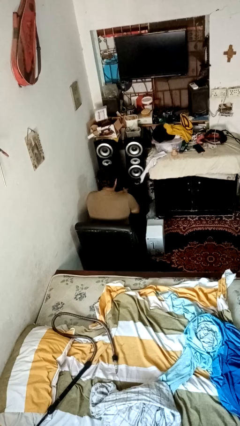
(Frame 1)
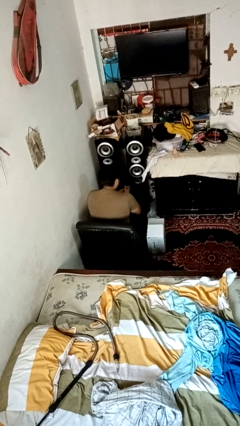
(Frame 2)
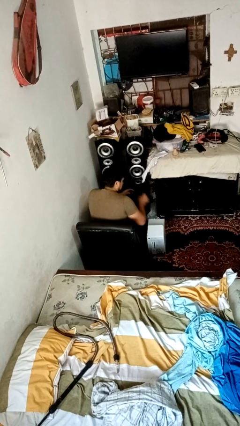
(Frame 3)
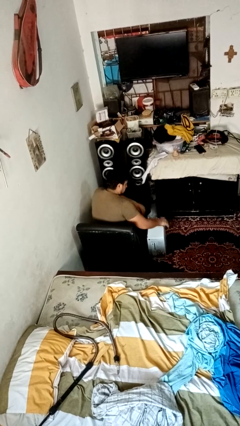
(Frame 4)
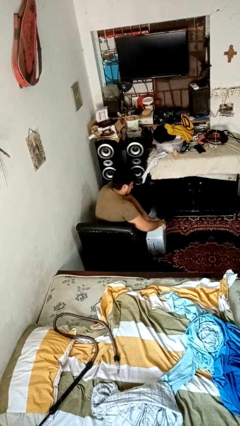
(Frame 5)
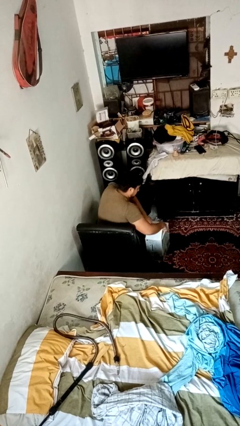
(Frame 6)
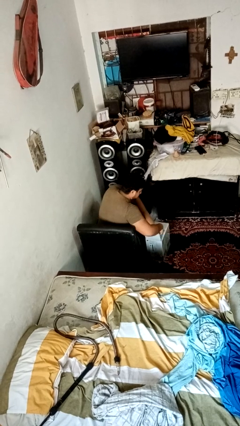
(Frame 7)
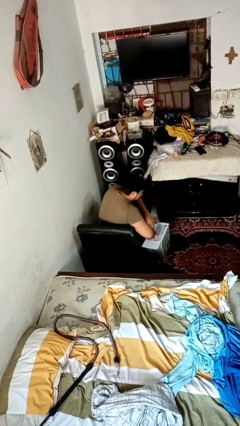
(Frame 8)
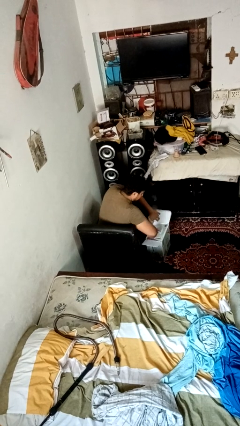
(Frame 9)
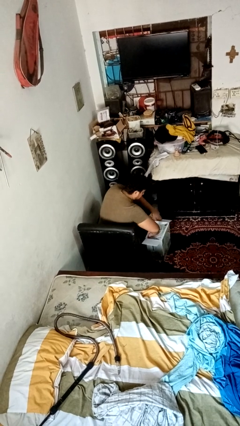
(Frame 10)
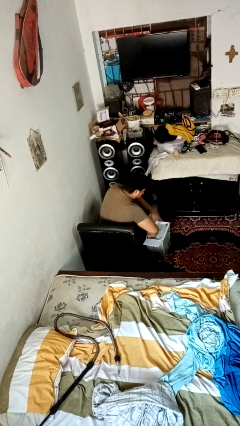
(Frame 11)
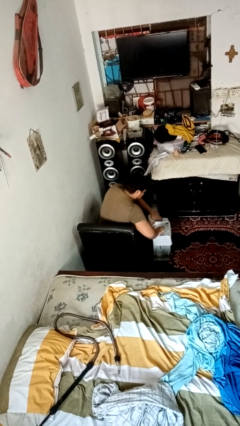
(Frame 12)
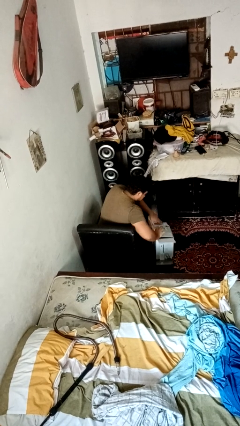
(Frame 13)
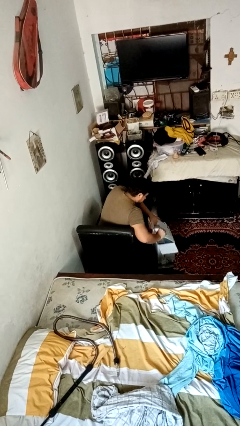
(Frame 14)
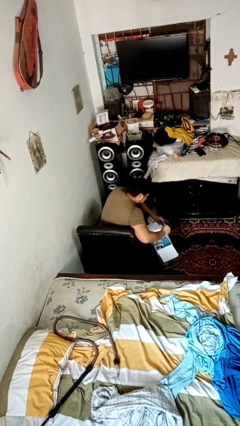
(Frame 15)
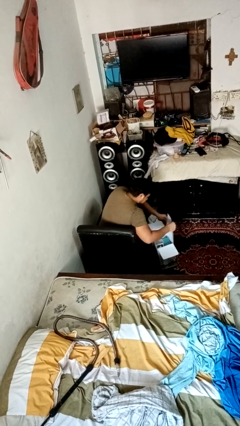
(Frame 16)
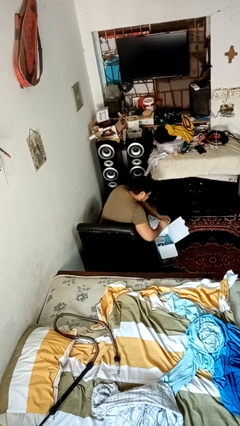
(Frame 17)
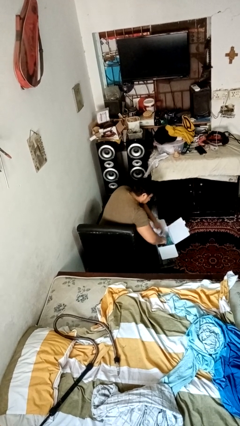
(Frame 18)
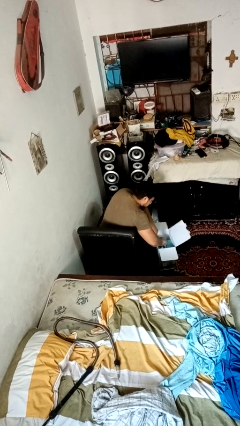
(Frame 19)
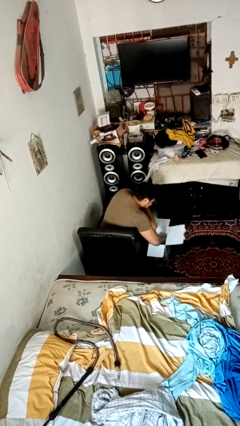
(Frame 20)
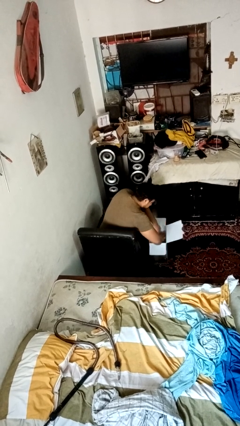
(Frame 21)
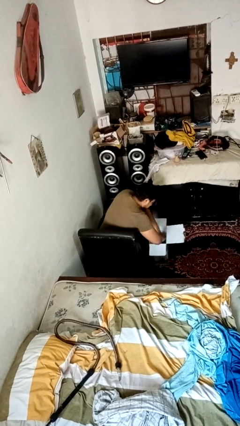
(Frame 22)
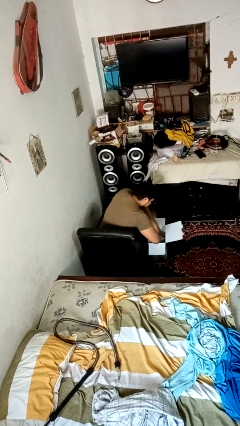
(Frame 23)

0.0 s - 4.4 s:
person searches in box

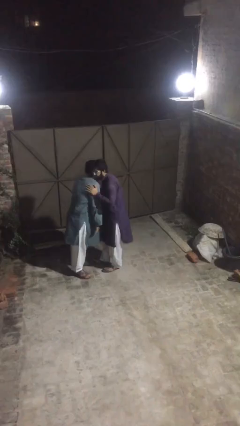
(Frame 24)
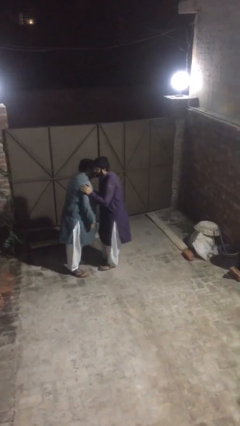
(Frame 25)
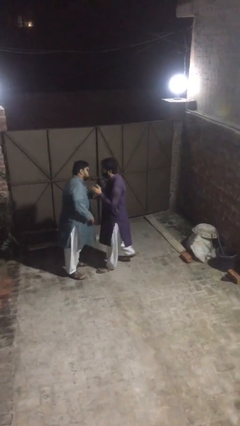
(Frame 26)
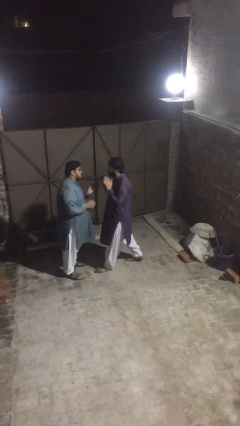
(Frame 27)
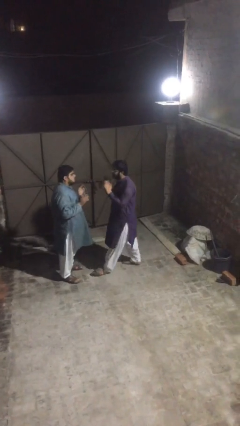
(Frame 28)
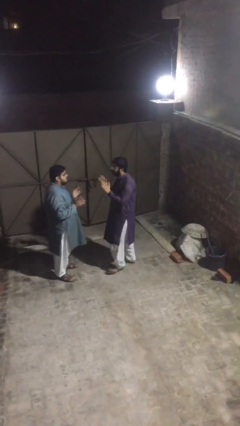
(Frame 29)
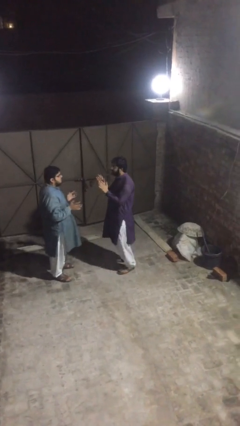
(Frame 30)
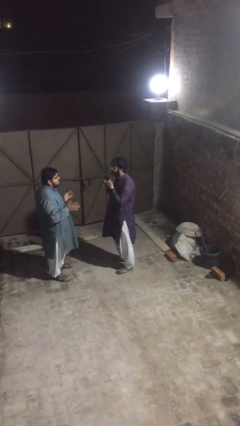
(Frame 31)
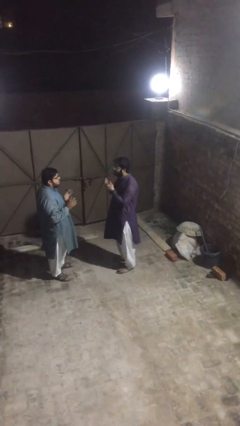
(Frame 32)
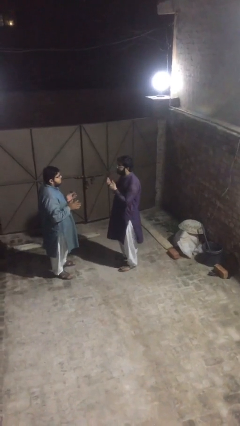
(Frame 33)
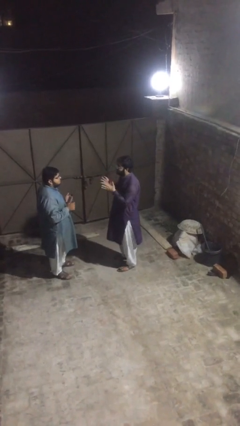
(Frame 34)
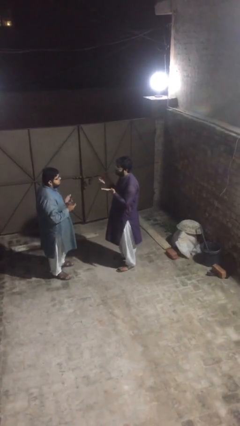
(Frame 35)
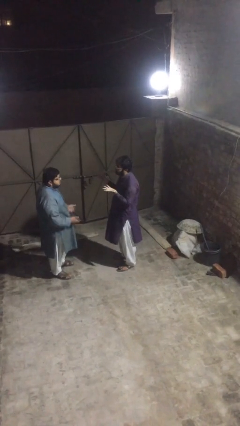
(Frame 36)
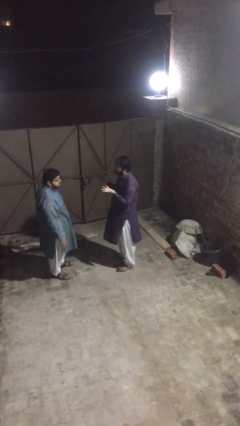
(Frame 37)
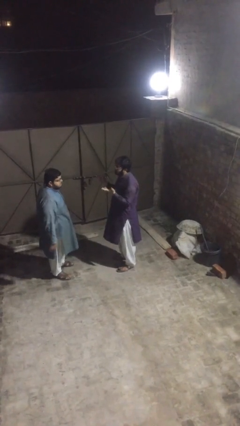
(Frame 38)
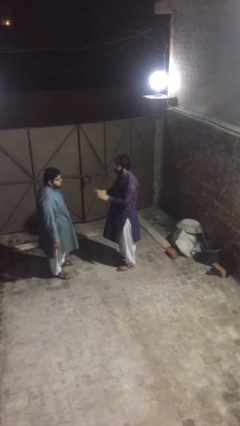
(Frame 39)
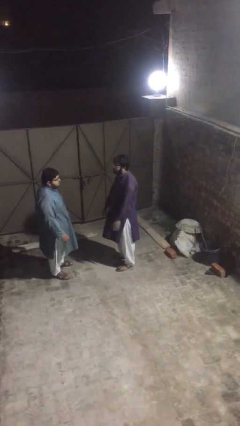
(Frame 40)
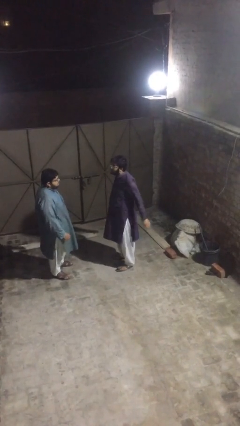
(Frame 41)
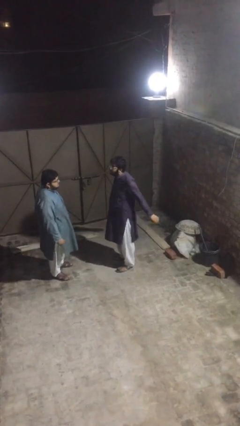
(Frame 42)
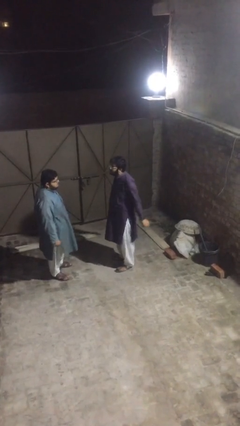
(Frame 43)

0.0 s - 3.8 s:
person talks to person

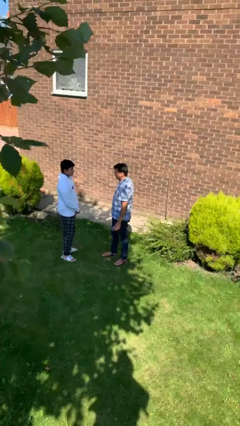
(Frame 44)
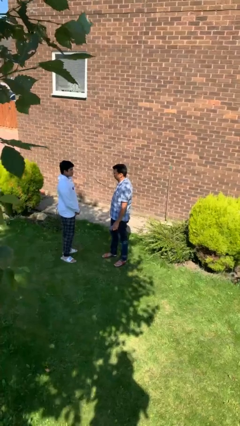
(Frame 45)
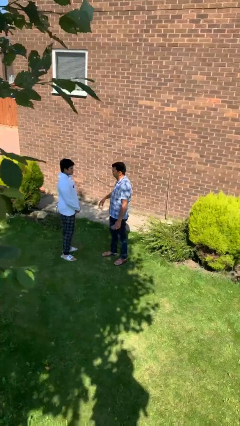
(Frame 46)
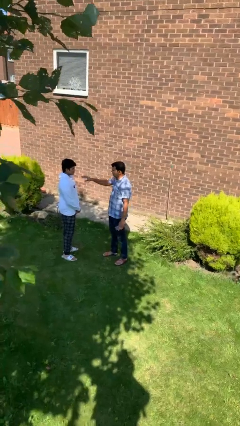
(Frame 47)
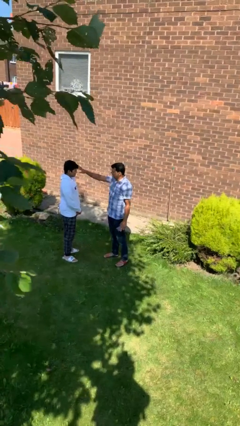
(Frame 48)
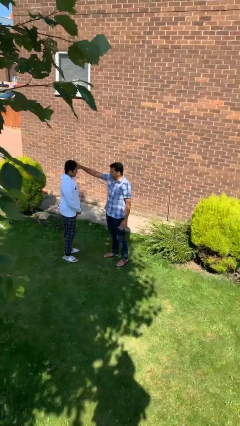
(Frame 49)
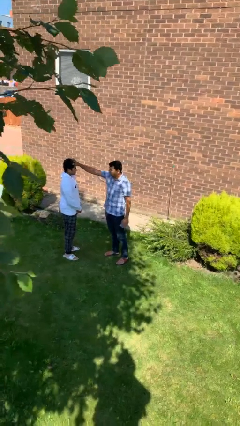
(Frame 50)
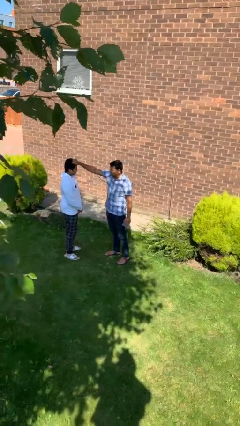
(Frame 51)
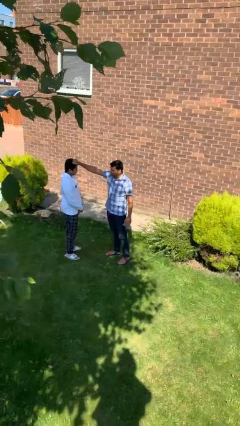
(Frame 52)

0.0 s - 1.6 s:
person grabs person by hair

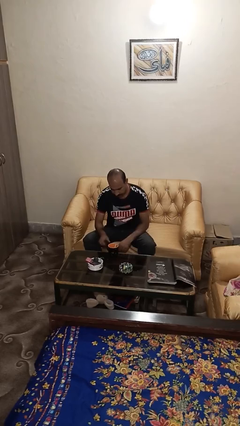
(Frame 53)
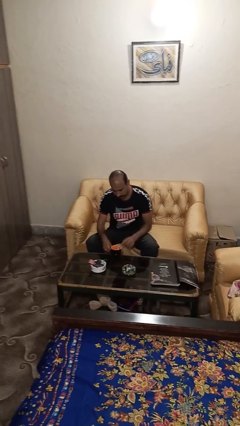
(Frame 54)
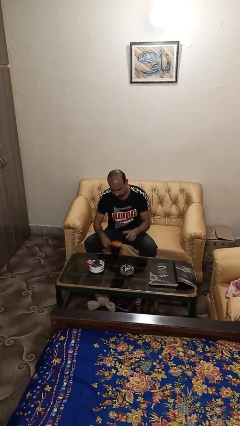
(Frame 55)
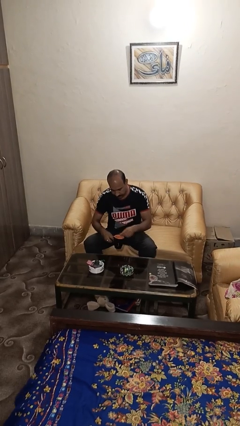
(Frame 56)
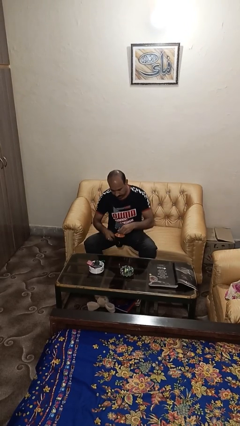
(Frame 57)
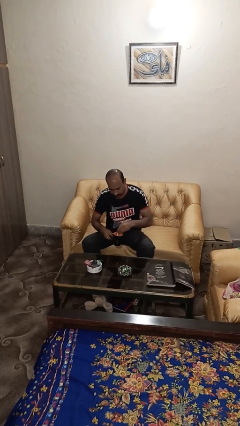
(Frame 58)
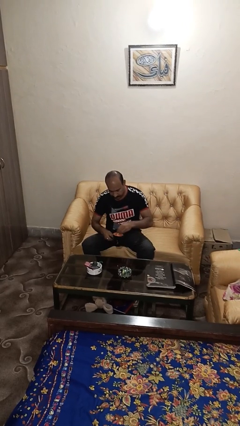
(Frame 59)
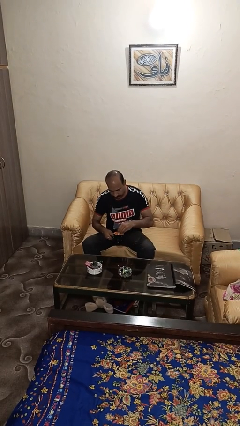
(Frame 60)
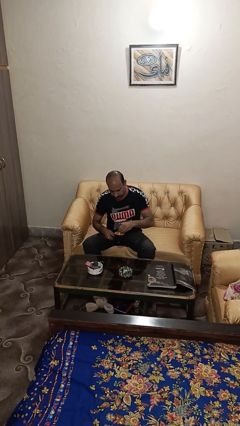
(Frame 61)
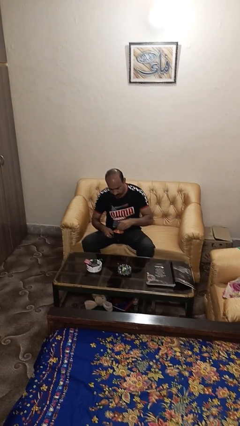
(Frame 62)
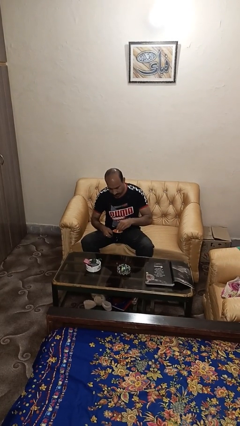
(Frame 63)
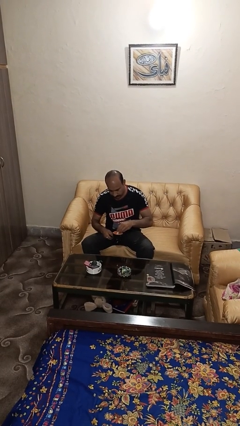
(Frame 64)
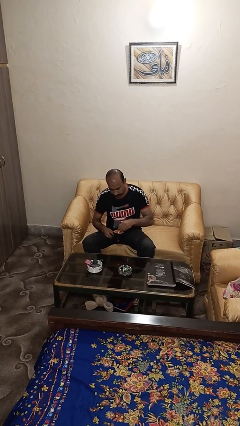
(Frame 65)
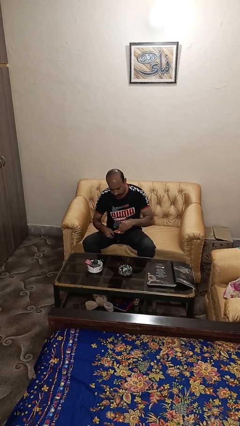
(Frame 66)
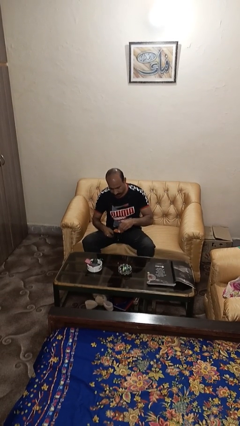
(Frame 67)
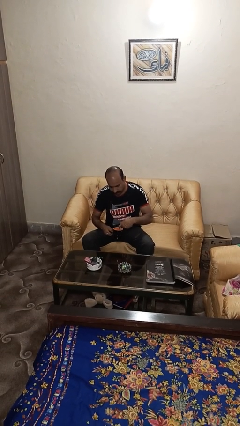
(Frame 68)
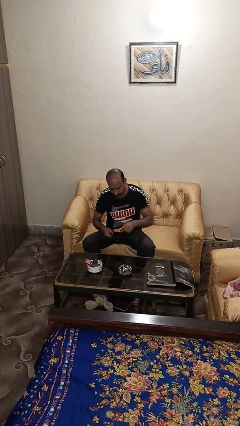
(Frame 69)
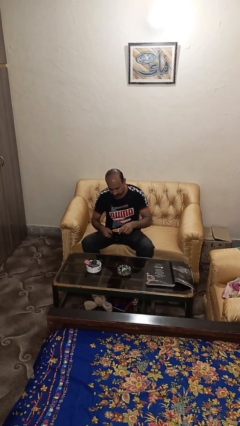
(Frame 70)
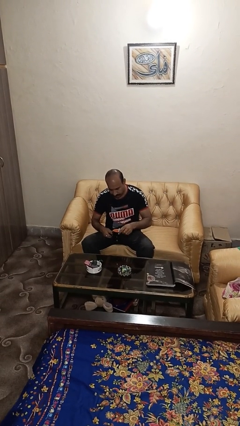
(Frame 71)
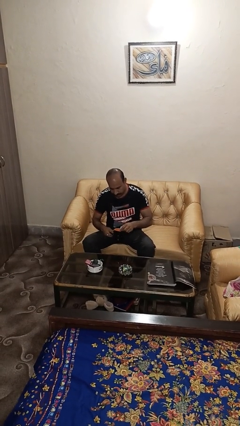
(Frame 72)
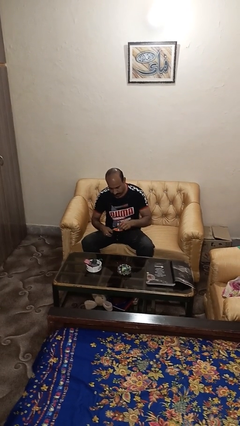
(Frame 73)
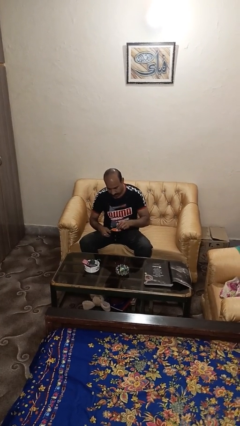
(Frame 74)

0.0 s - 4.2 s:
person stirs mug

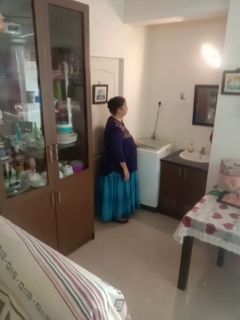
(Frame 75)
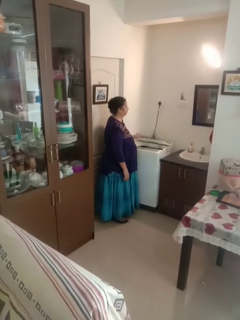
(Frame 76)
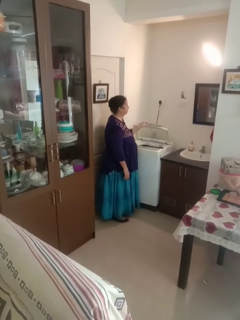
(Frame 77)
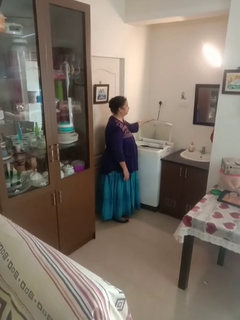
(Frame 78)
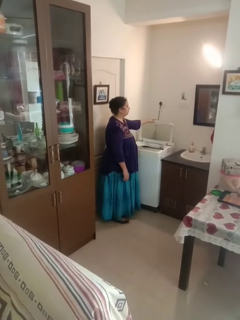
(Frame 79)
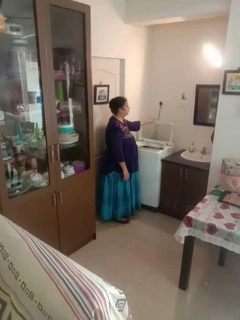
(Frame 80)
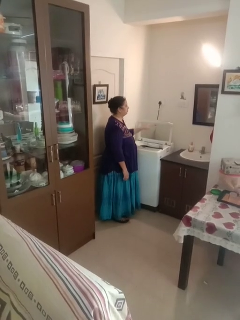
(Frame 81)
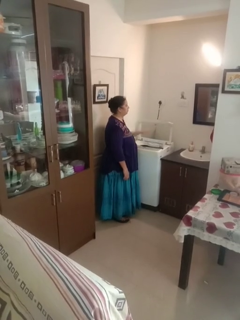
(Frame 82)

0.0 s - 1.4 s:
person opens clothes washer

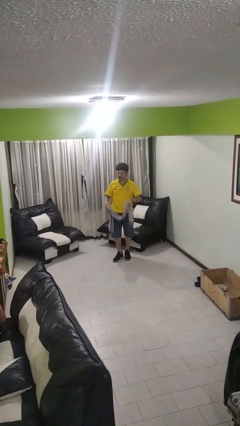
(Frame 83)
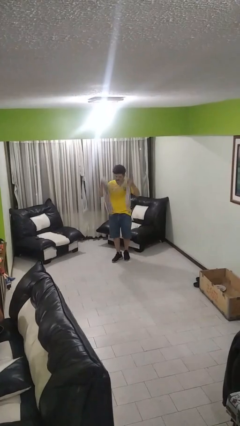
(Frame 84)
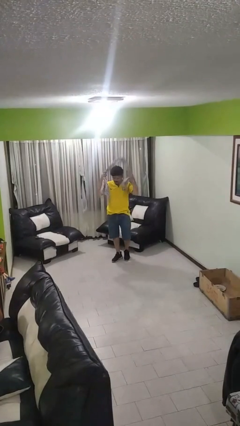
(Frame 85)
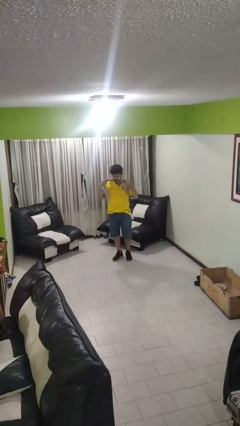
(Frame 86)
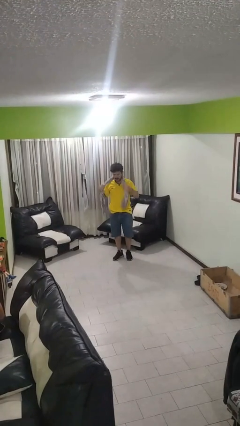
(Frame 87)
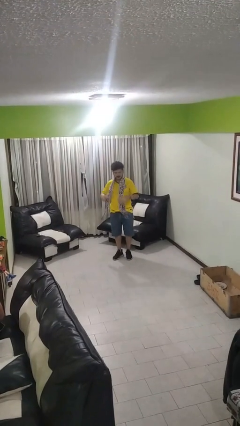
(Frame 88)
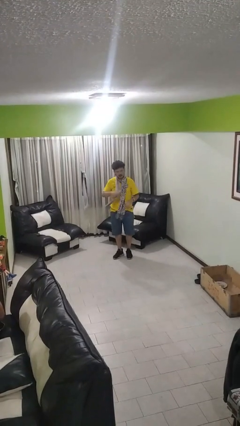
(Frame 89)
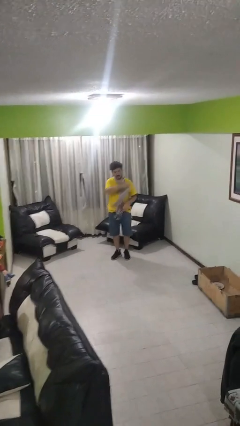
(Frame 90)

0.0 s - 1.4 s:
person puts on scarf

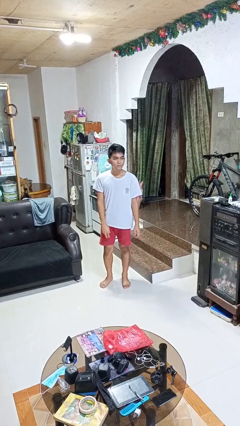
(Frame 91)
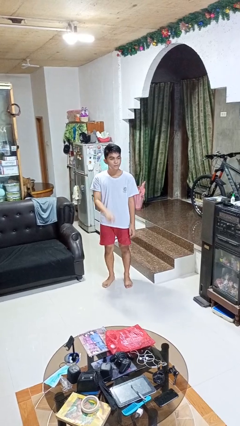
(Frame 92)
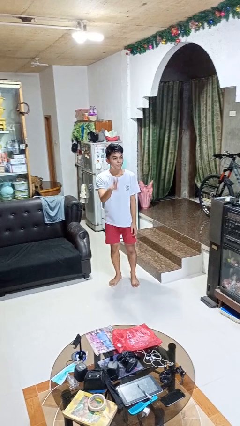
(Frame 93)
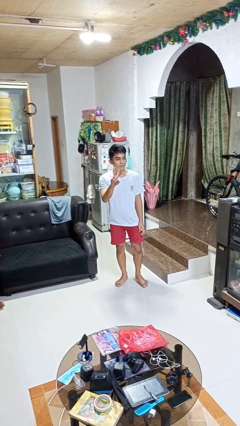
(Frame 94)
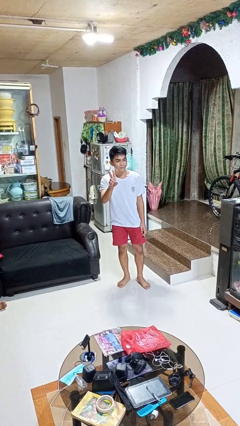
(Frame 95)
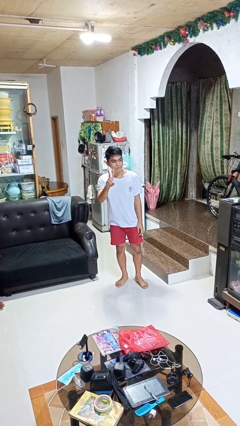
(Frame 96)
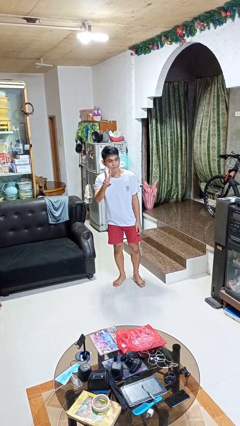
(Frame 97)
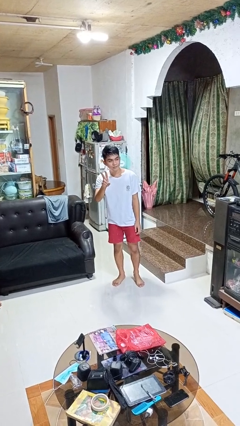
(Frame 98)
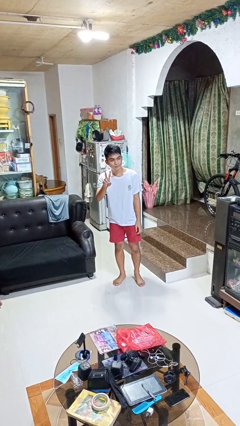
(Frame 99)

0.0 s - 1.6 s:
person gestures peace
